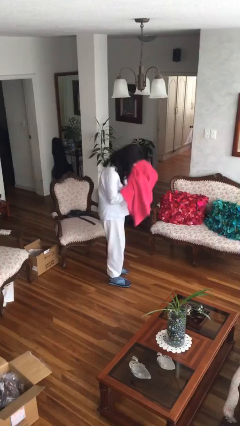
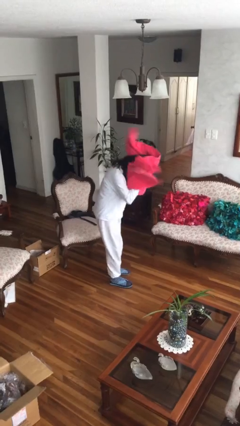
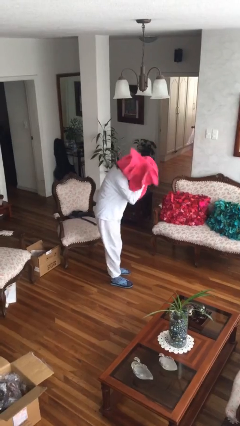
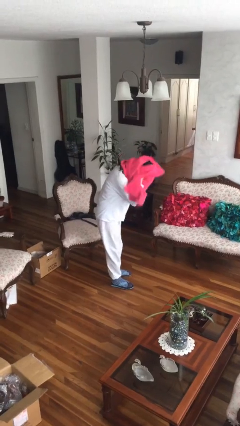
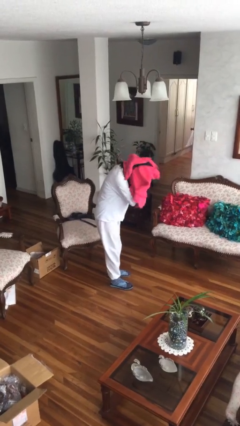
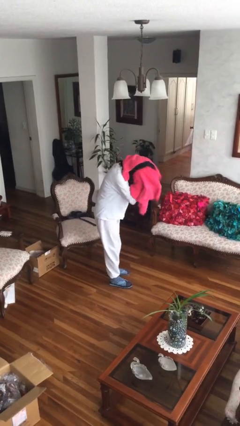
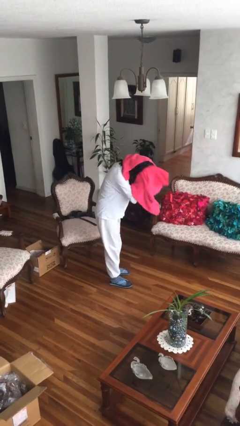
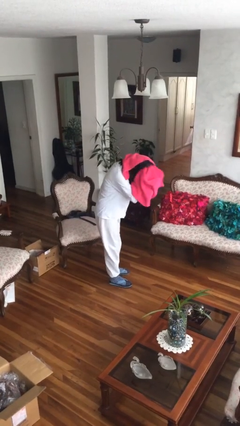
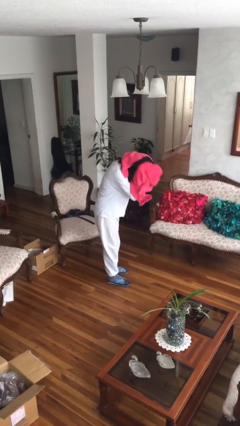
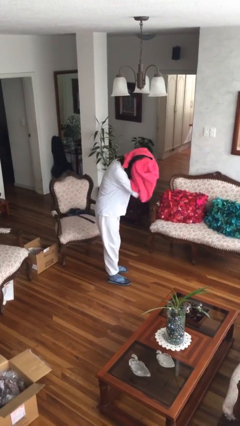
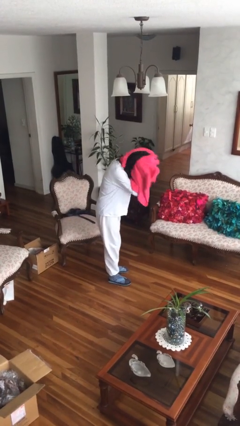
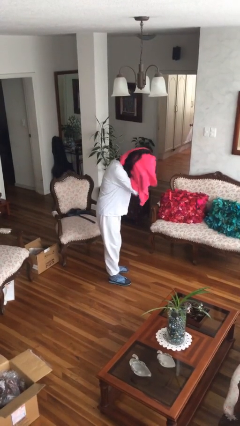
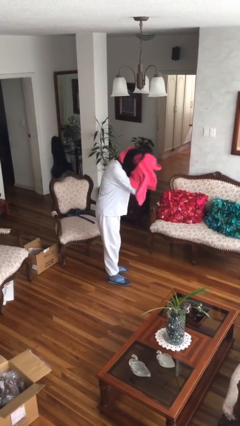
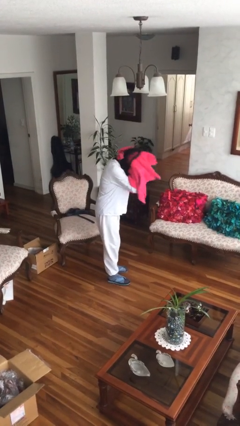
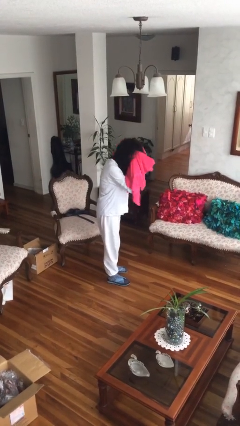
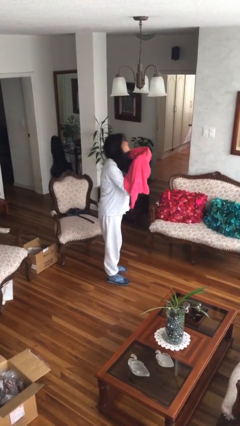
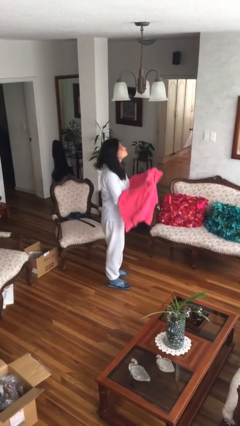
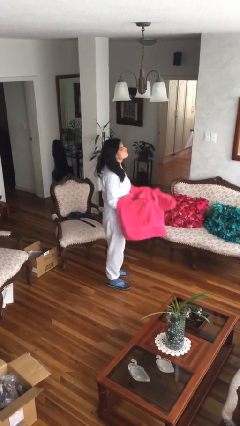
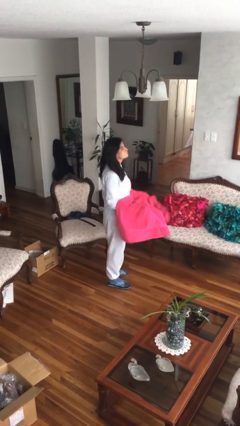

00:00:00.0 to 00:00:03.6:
person dries hair with towel

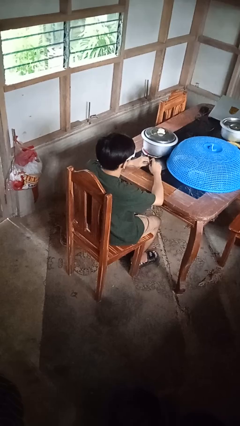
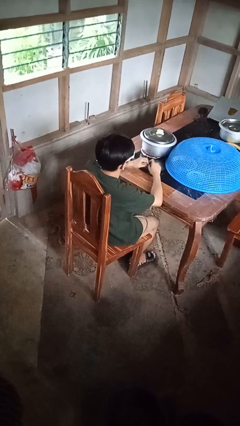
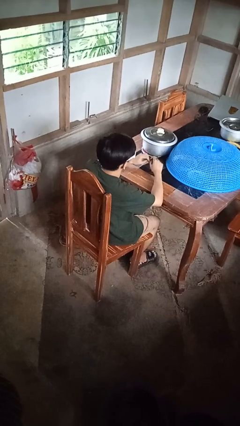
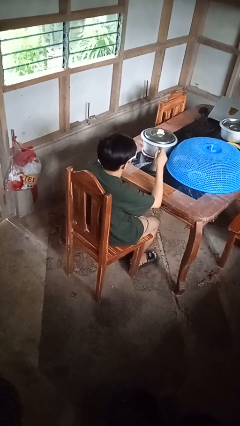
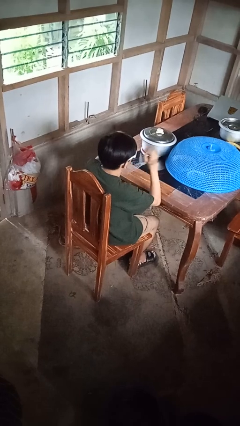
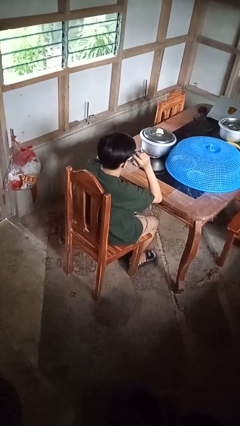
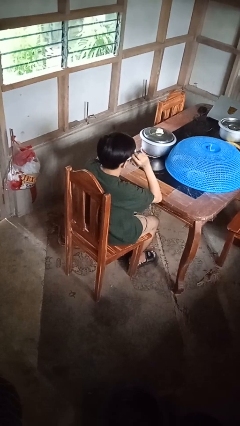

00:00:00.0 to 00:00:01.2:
person takes off sunglasses

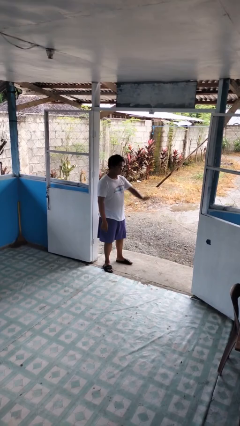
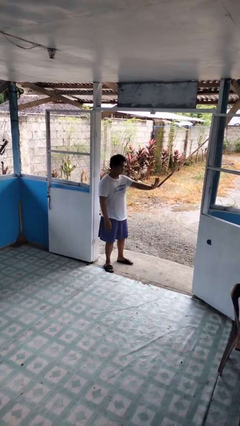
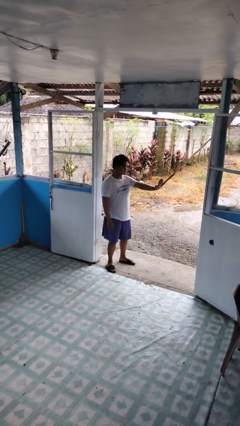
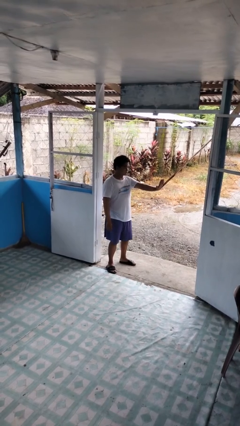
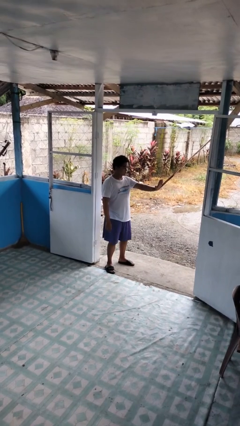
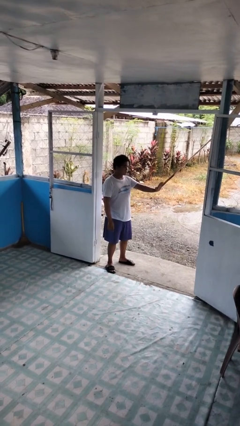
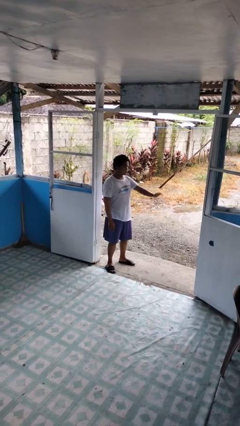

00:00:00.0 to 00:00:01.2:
person gestures stop

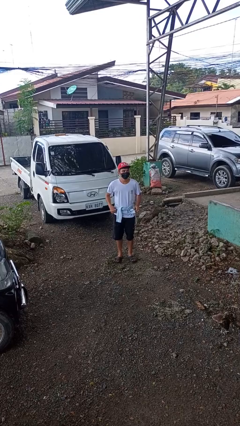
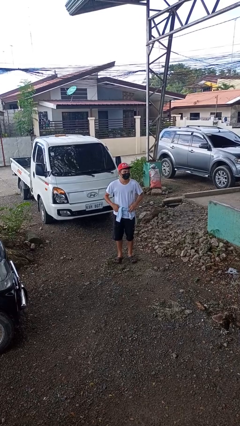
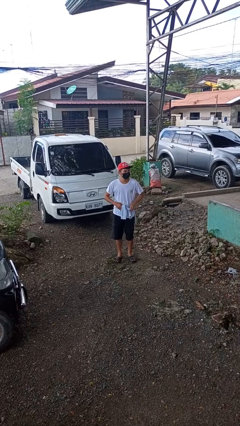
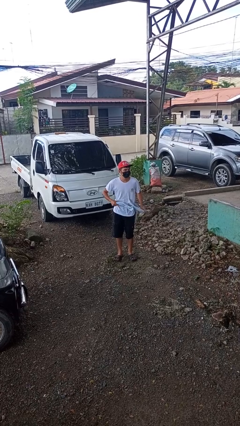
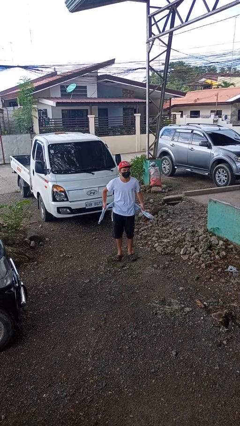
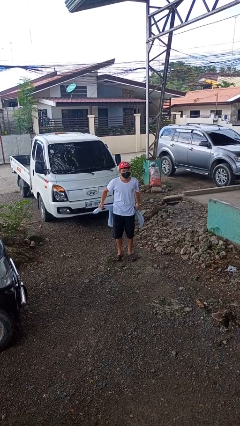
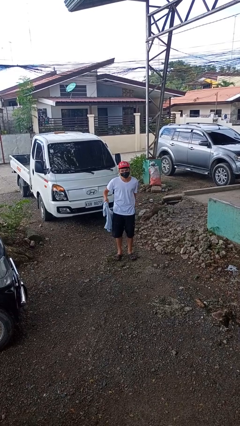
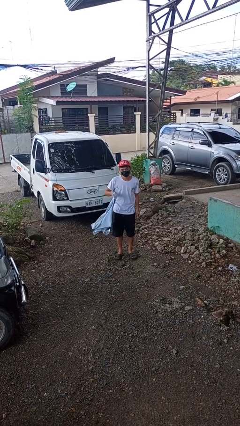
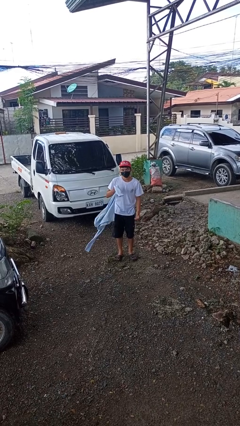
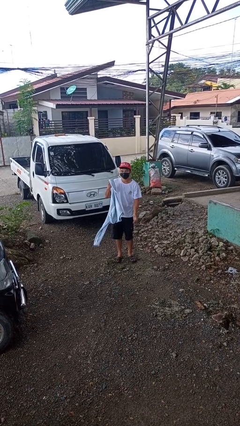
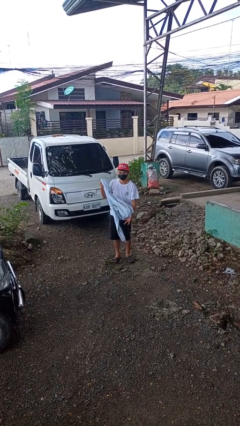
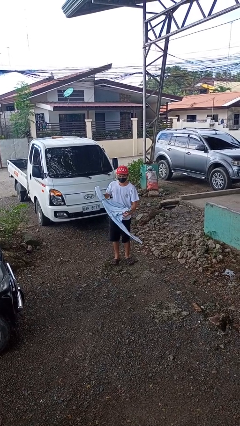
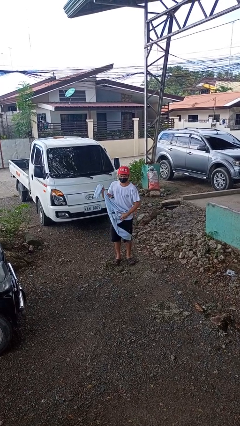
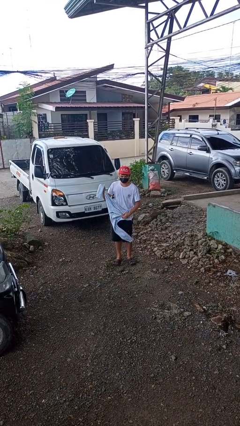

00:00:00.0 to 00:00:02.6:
person unties jacket around waist

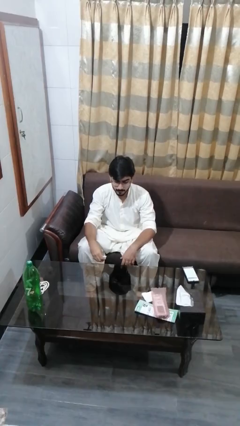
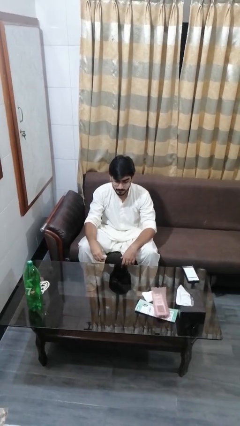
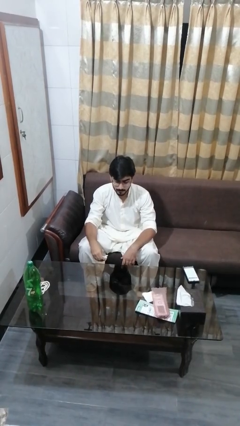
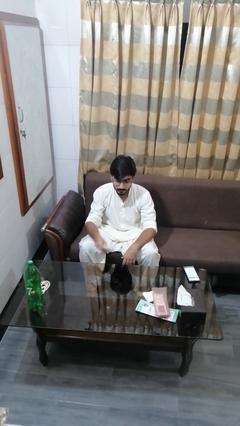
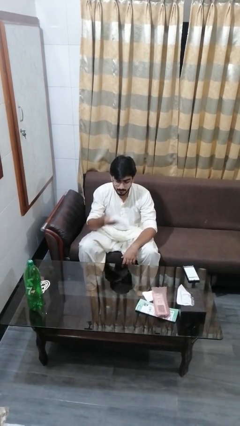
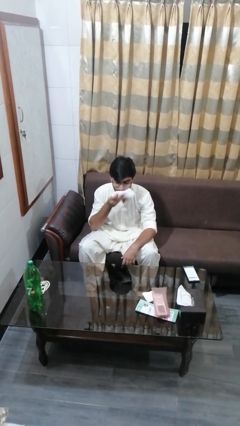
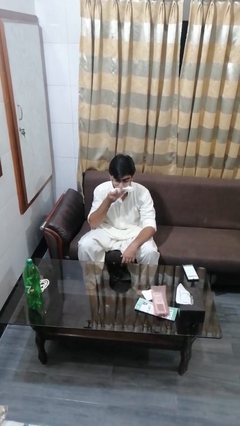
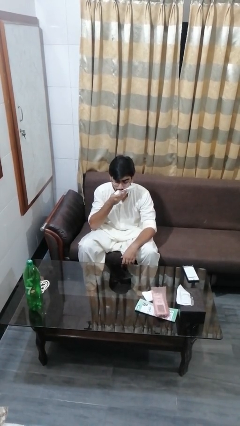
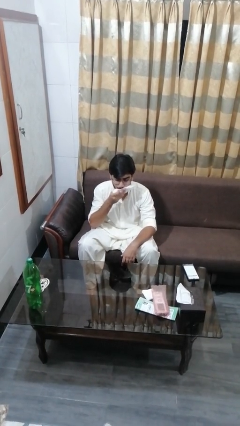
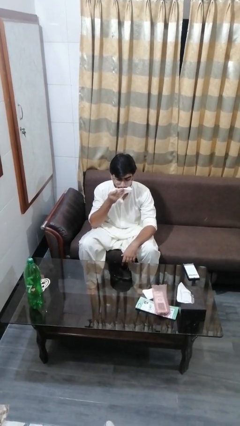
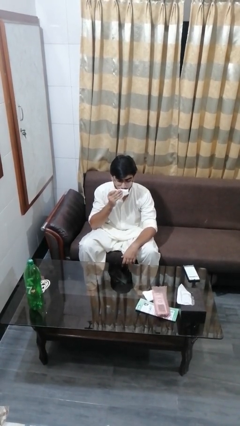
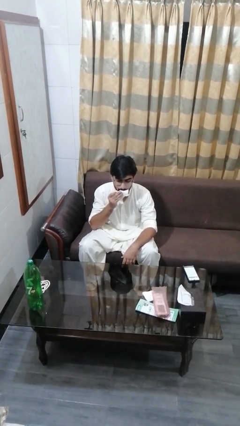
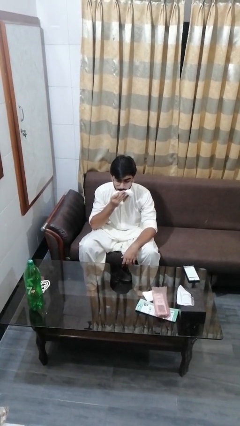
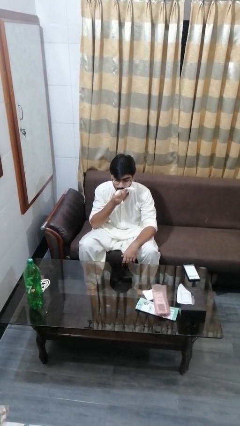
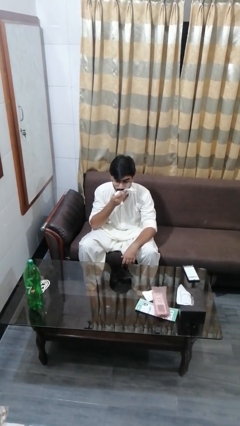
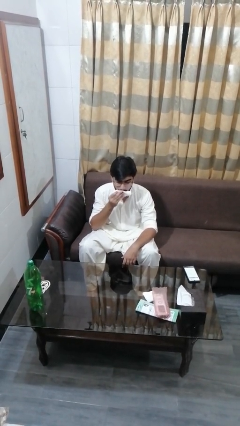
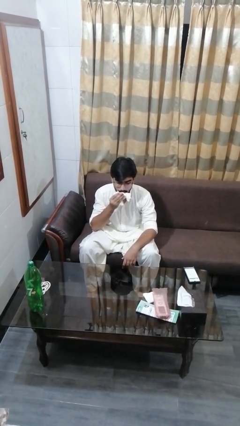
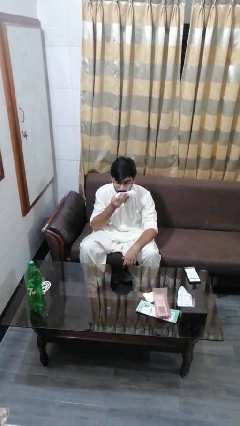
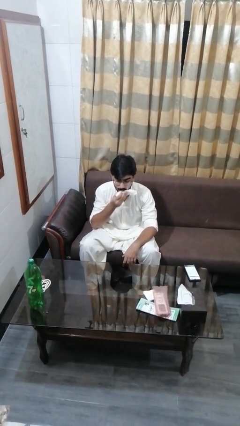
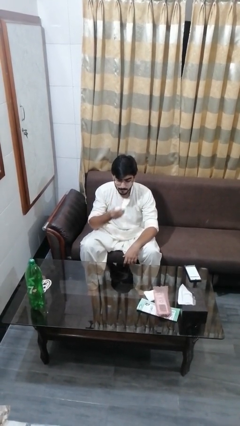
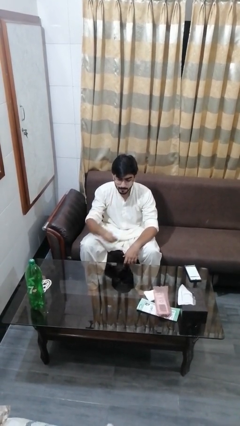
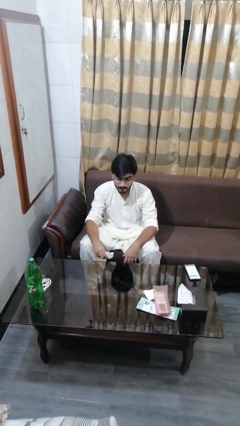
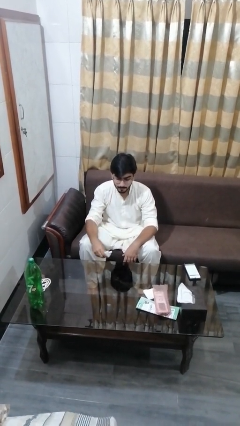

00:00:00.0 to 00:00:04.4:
person wipes mouth with napkin

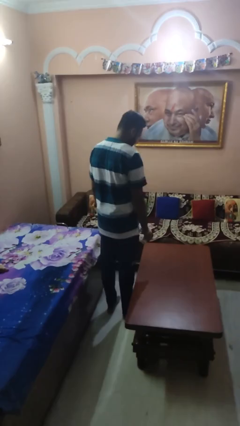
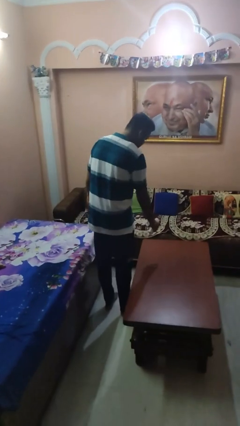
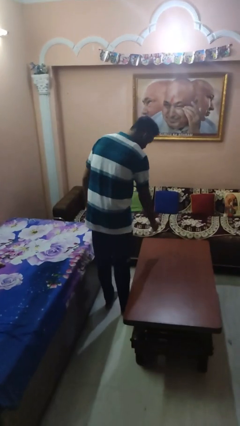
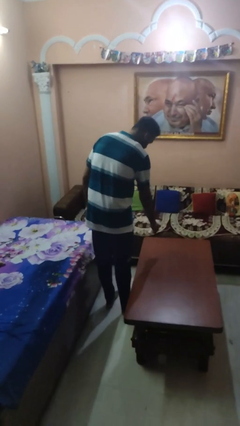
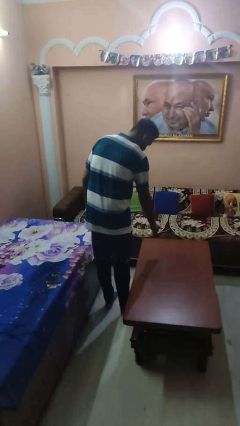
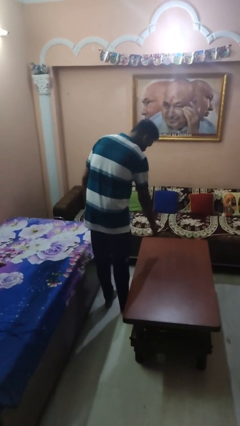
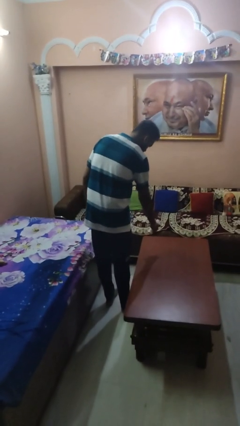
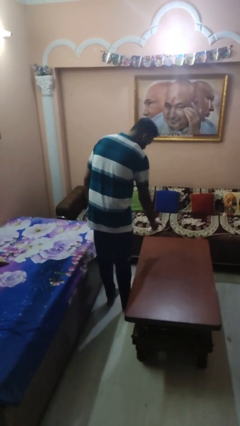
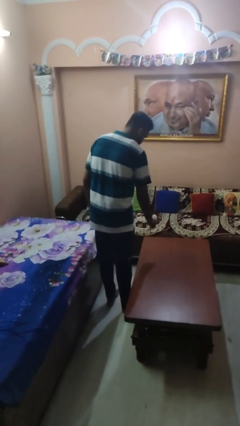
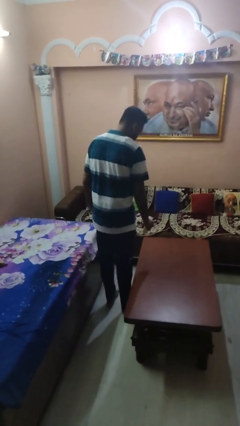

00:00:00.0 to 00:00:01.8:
person sprays from bottle

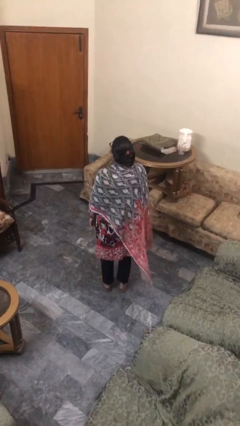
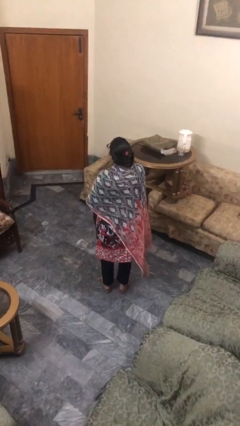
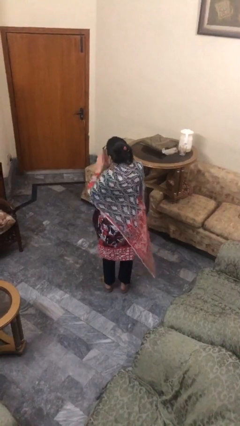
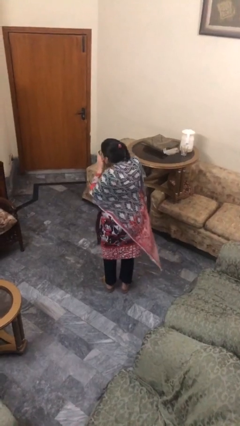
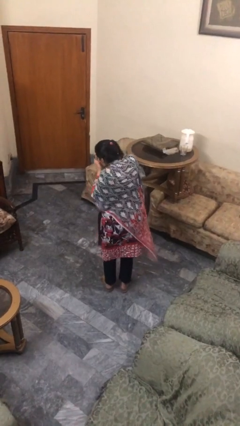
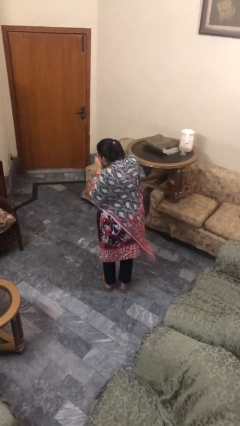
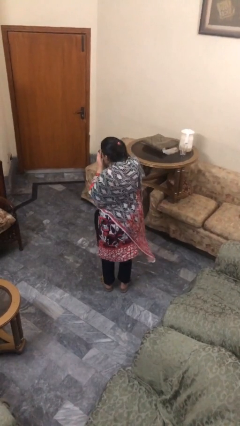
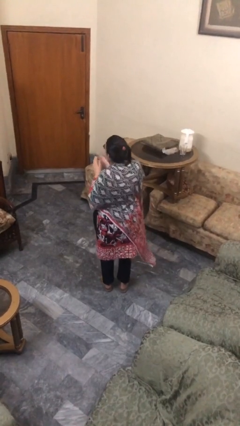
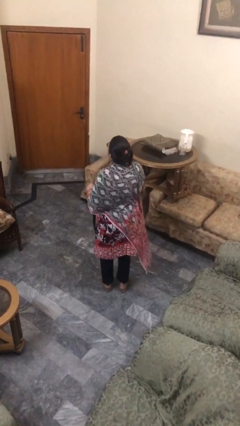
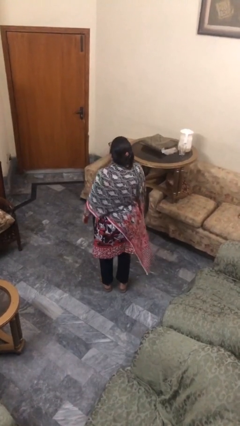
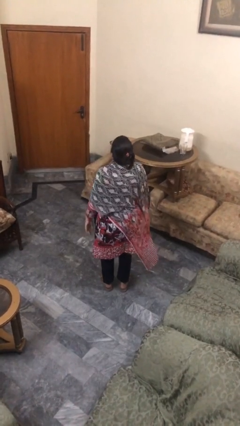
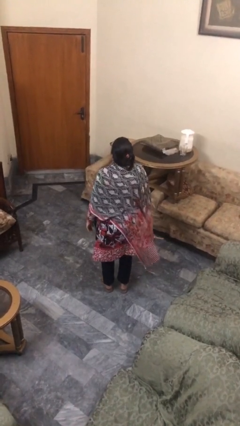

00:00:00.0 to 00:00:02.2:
person sneezes into hand

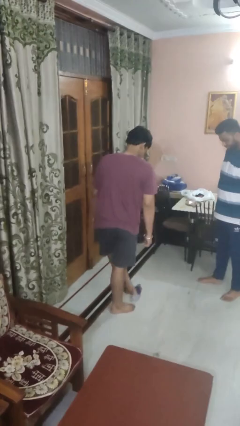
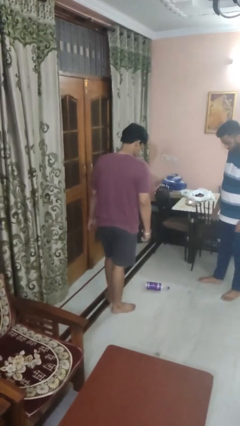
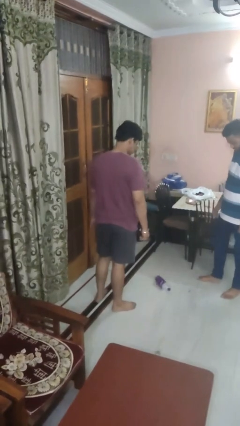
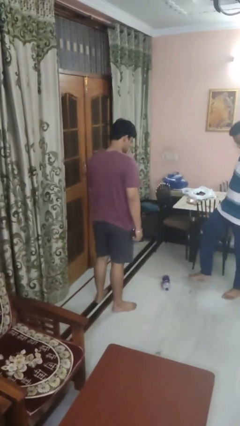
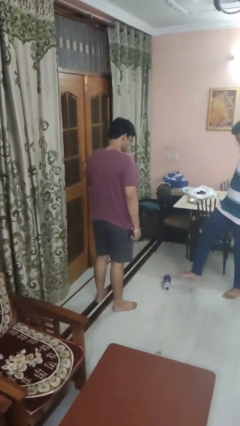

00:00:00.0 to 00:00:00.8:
person kicks object to person
